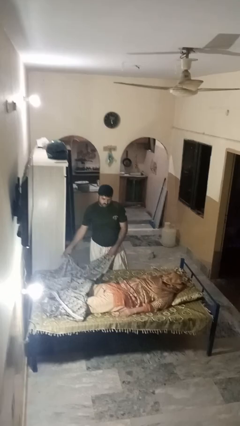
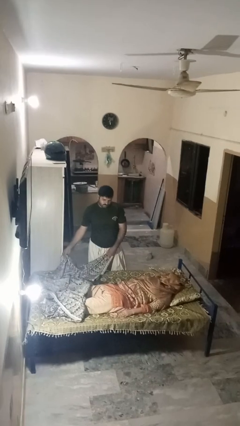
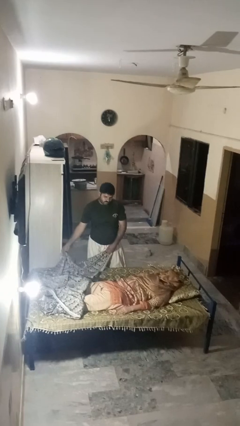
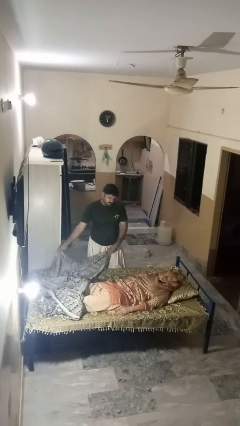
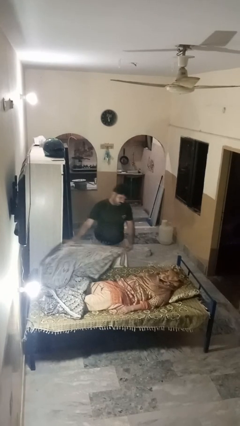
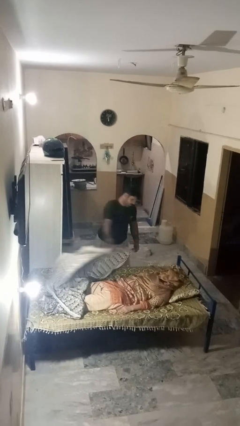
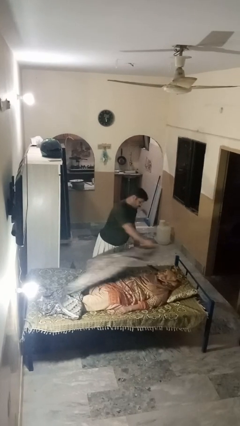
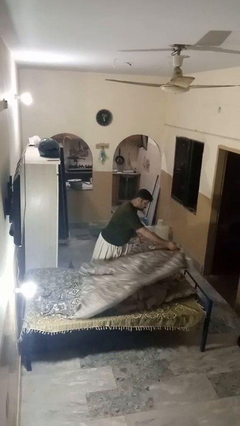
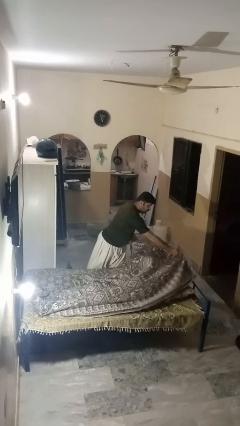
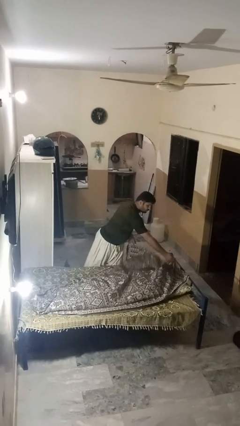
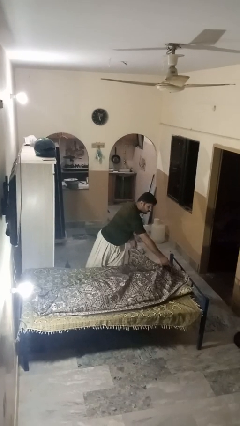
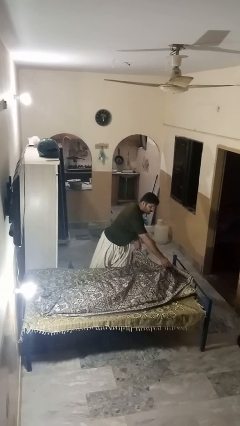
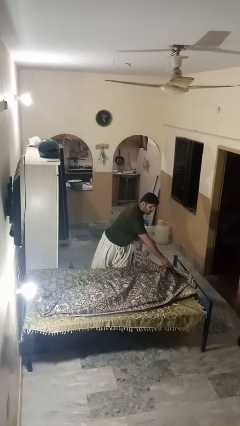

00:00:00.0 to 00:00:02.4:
person covers friend with blanket

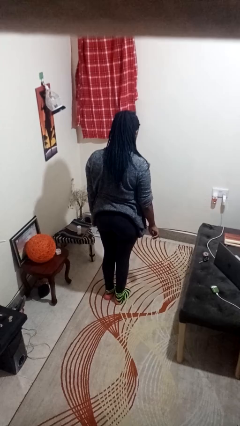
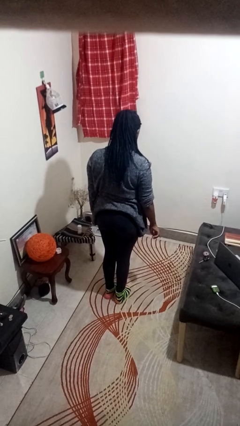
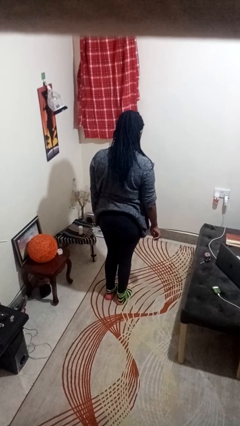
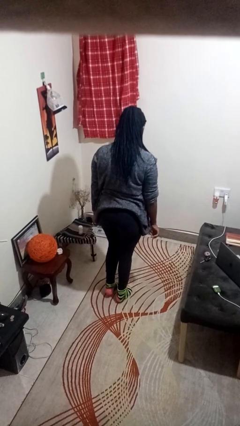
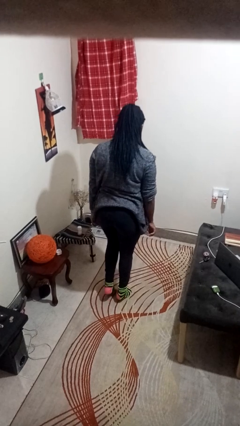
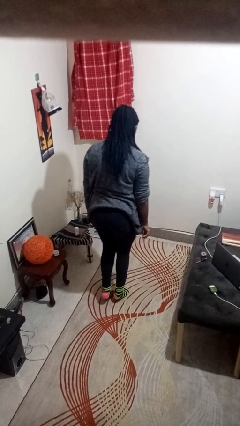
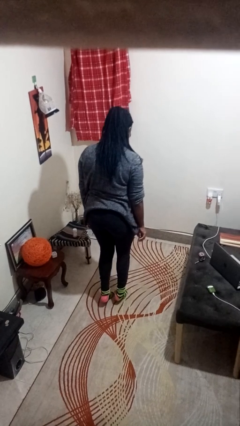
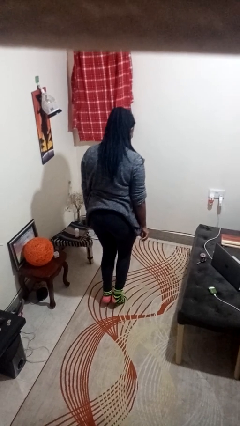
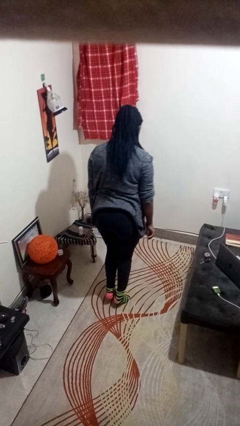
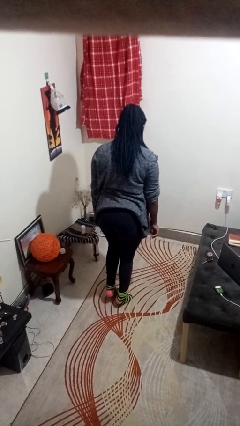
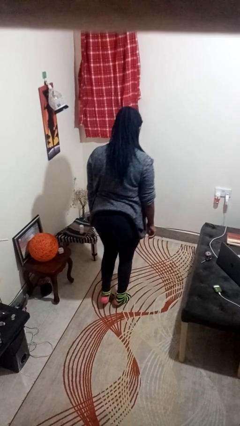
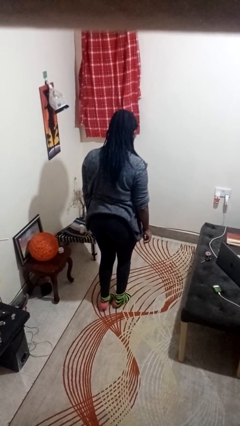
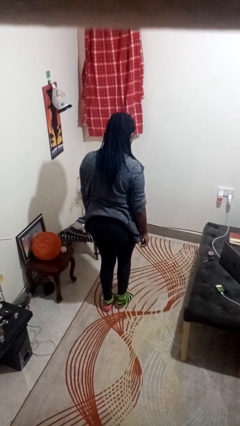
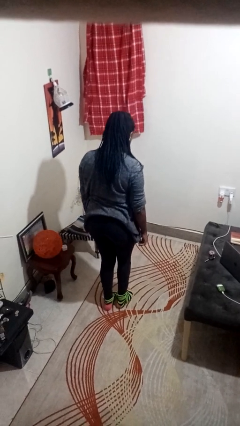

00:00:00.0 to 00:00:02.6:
person walks tiptoe

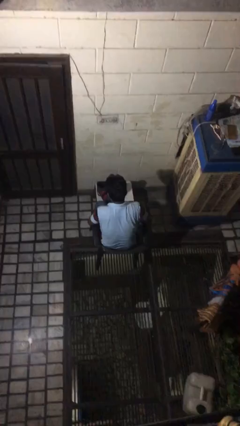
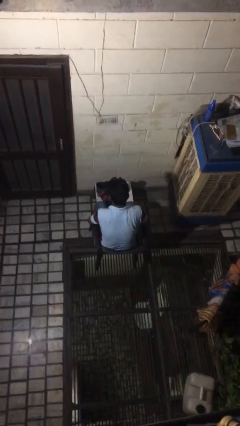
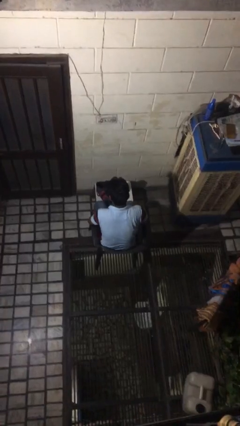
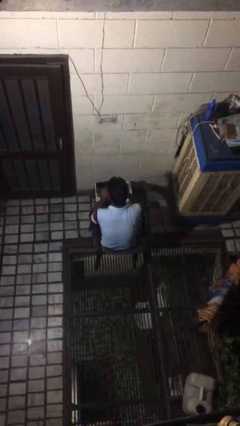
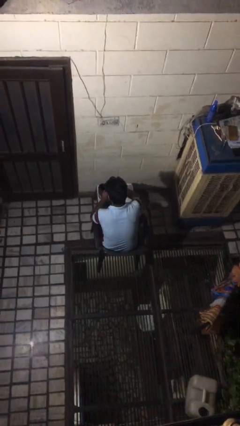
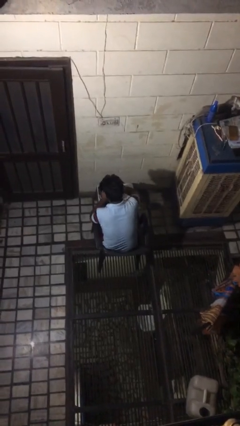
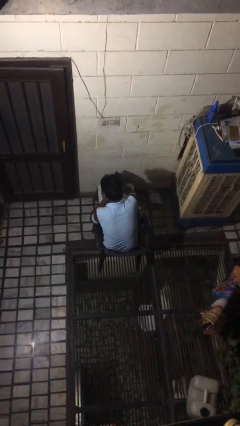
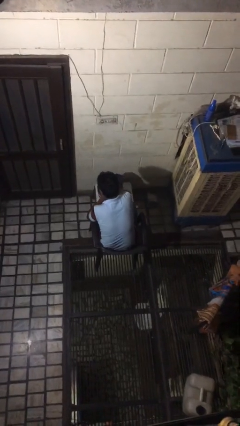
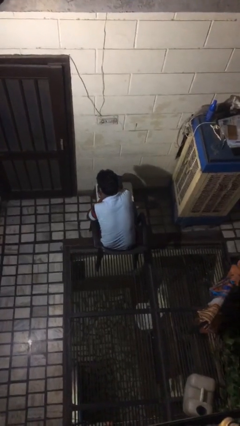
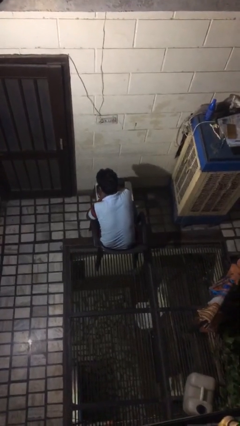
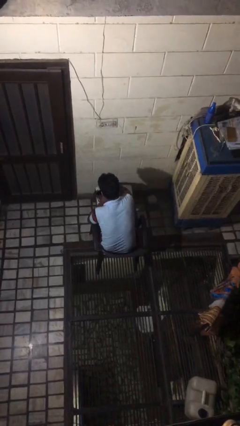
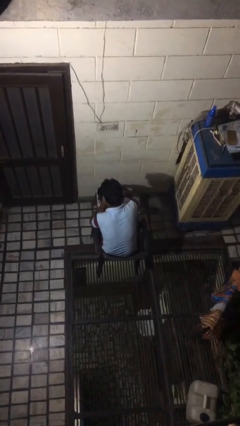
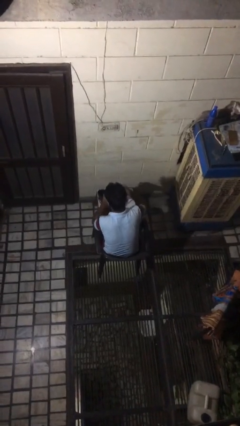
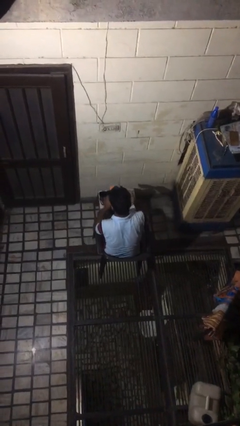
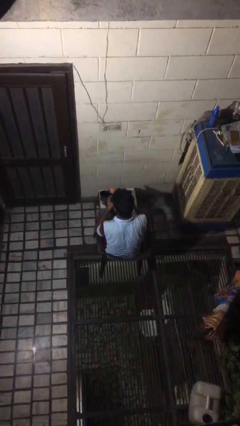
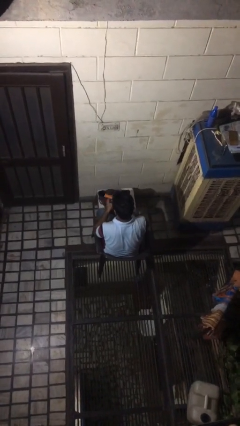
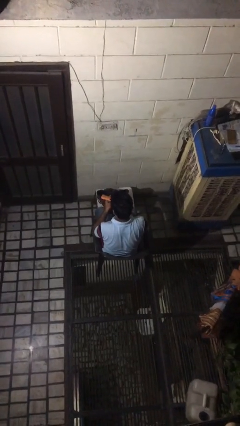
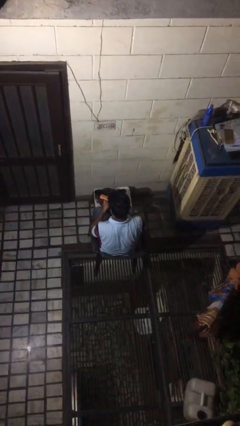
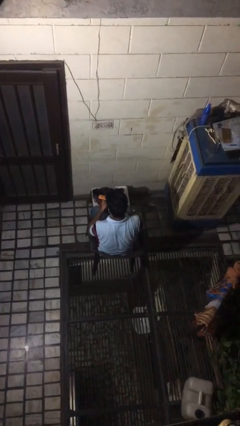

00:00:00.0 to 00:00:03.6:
person takes object from bag

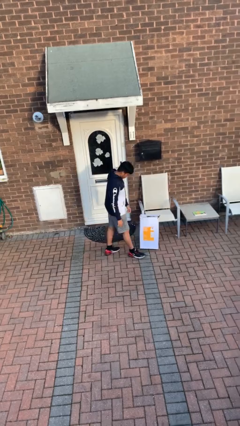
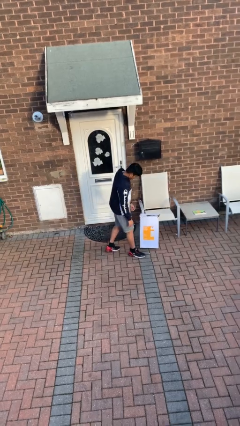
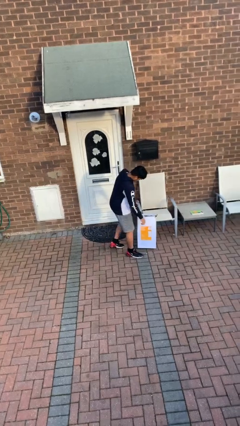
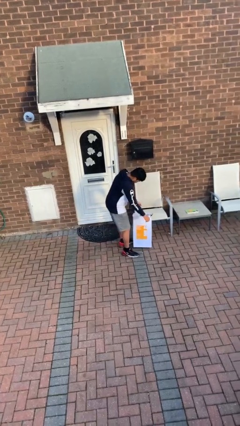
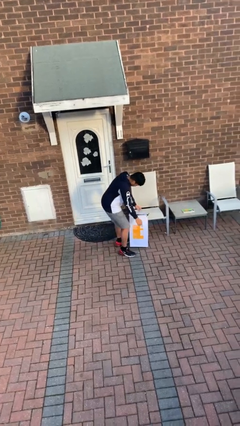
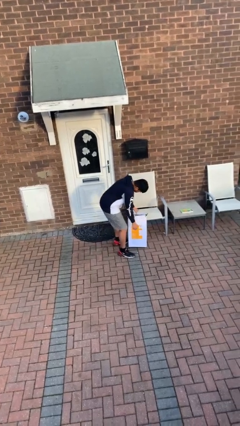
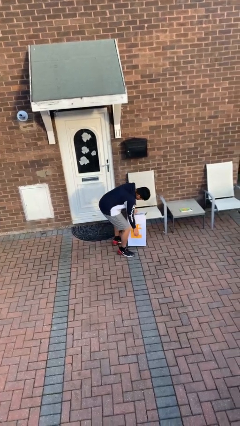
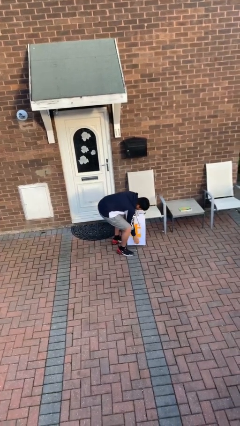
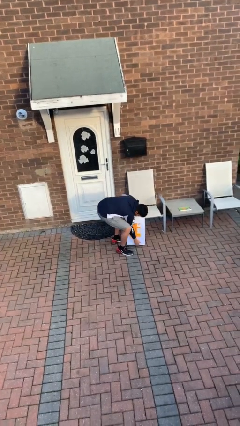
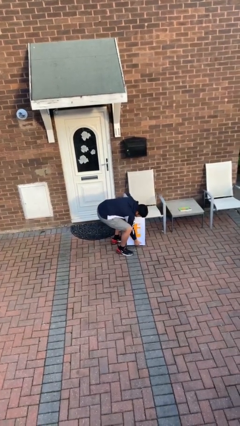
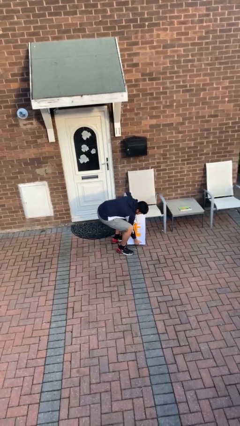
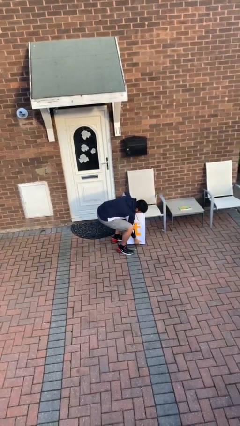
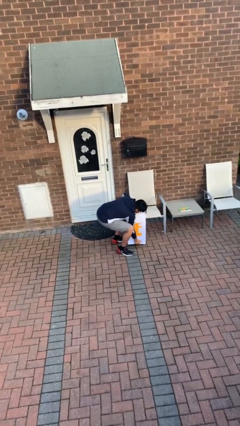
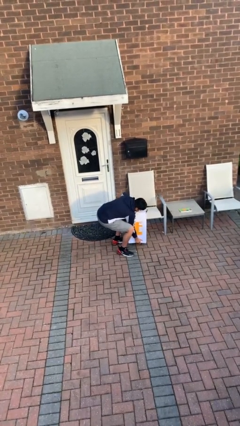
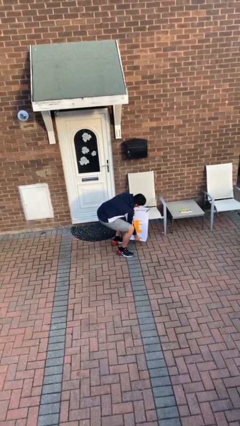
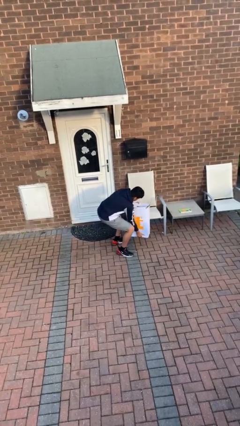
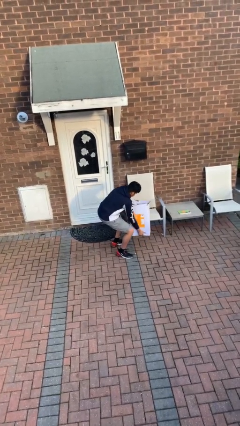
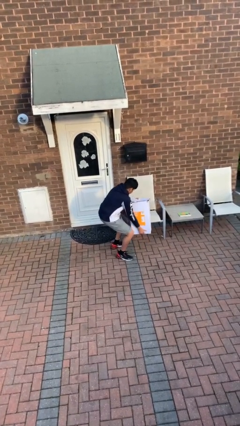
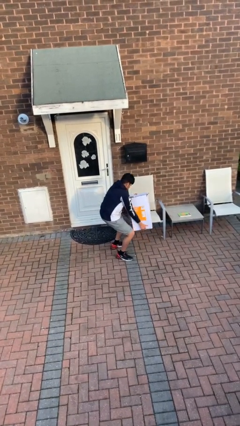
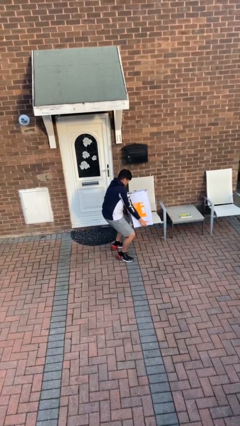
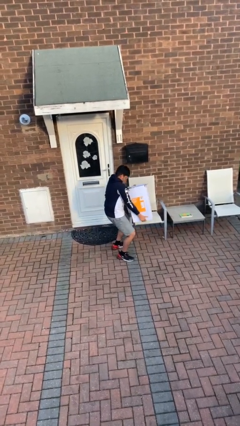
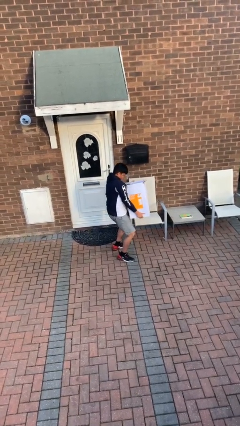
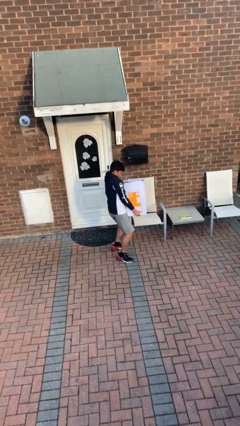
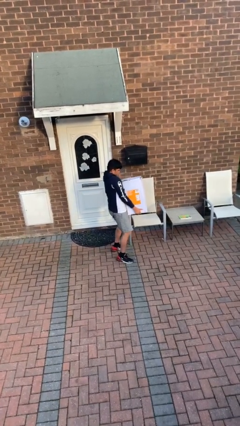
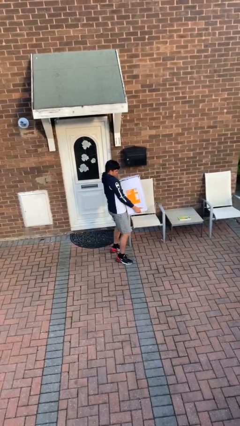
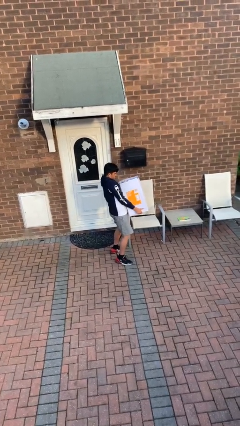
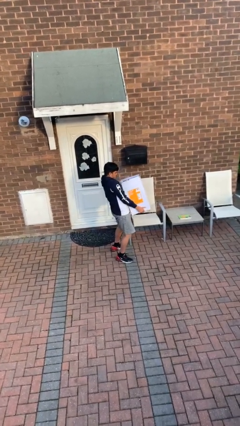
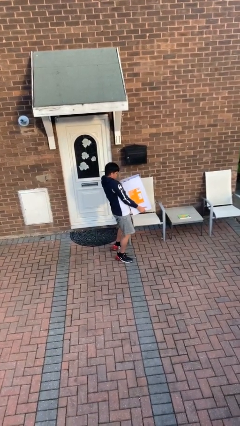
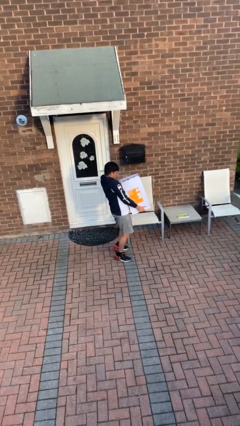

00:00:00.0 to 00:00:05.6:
person picks up object from floor

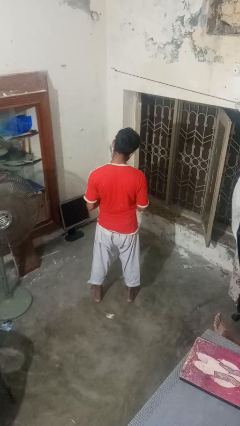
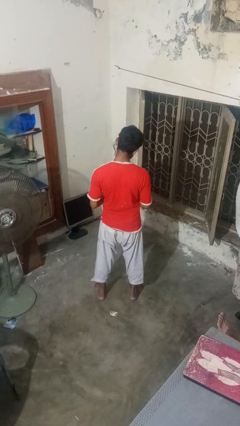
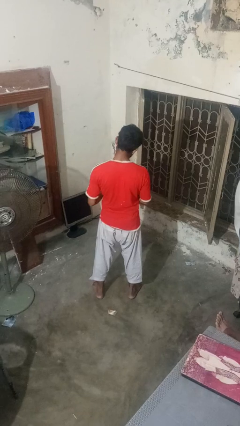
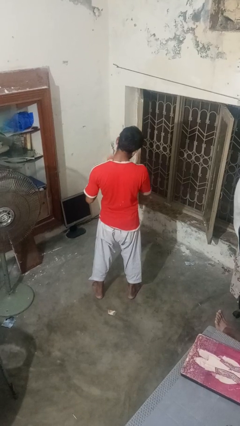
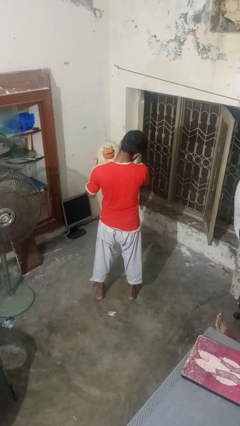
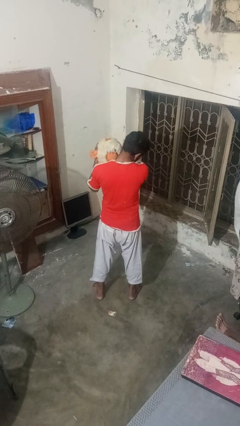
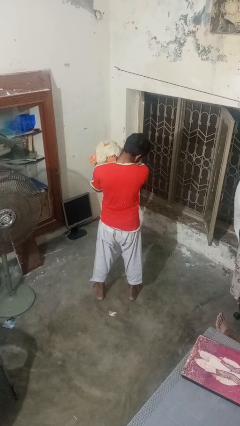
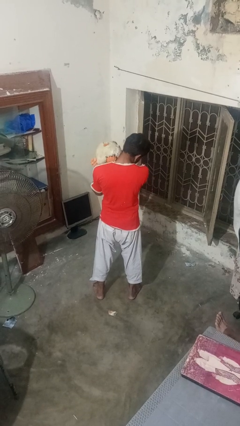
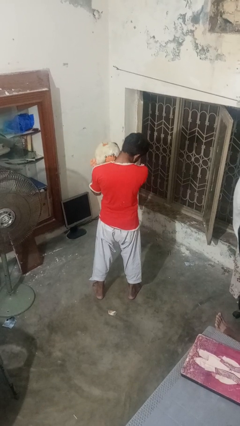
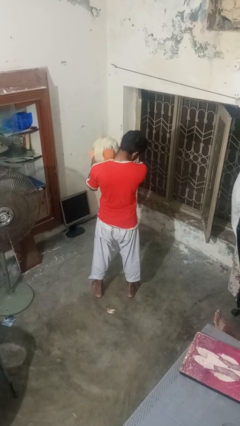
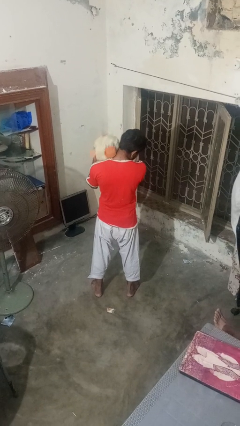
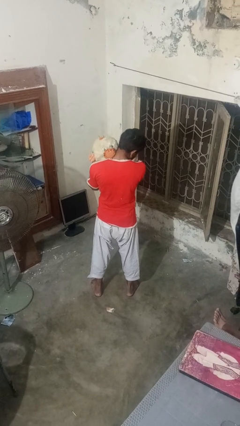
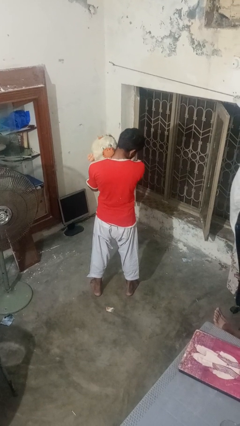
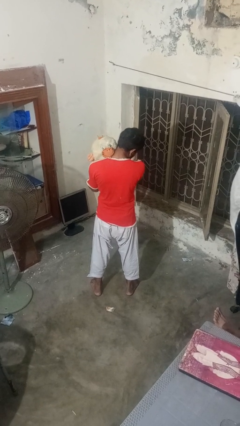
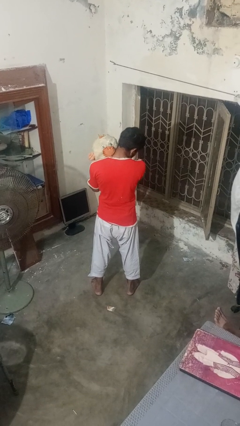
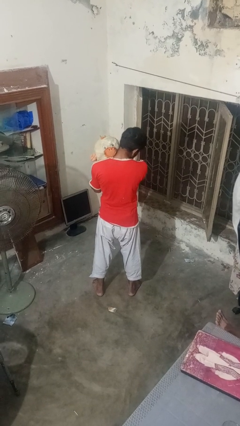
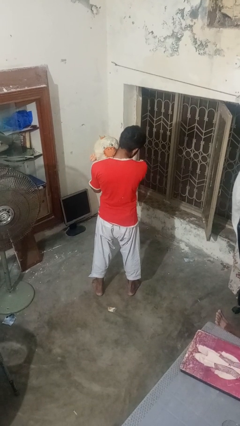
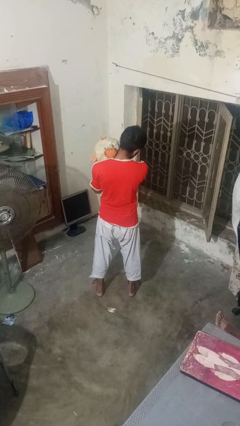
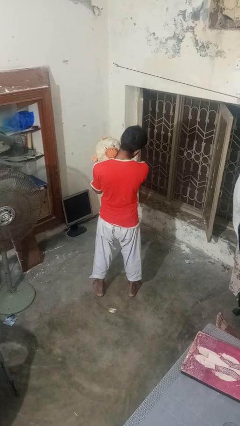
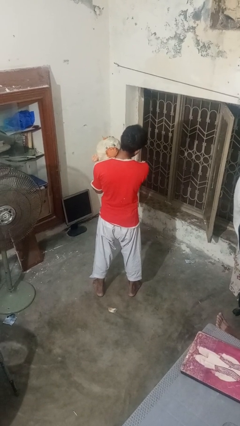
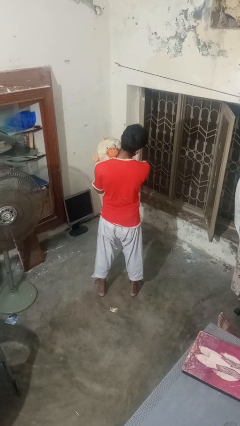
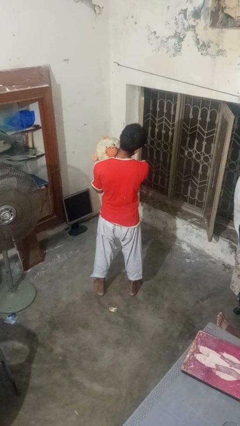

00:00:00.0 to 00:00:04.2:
person hugs stuffed animal
